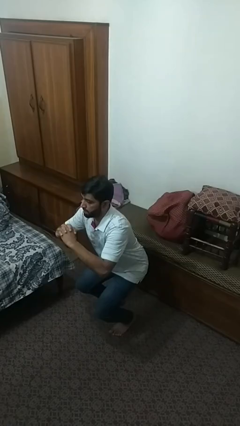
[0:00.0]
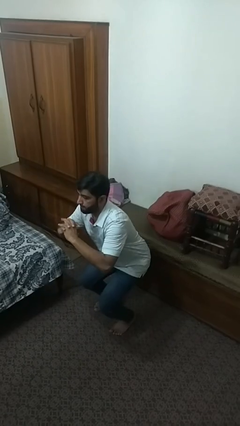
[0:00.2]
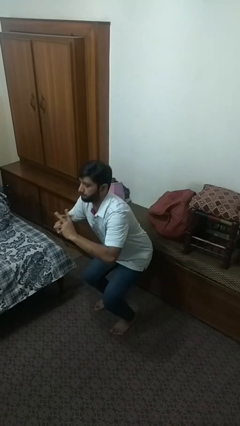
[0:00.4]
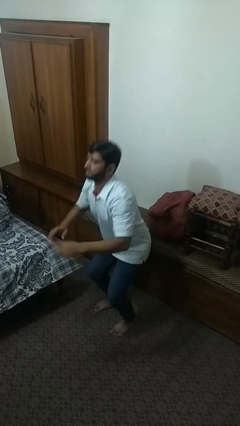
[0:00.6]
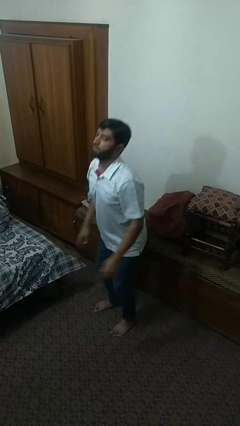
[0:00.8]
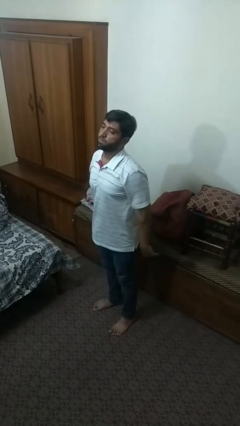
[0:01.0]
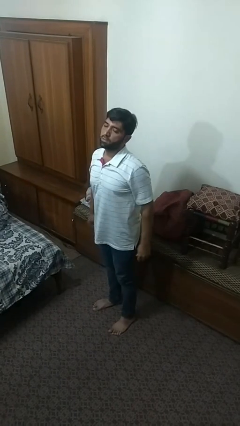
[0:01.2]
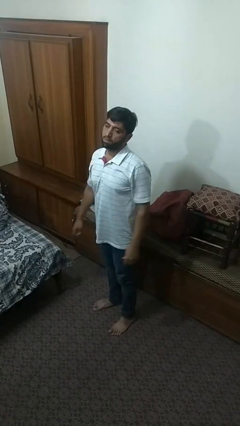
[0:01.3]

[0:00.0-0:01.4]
person stands up

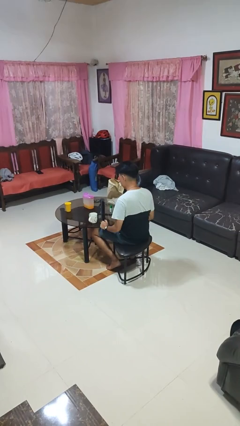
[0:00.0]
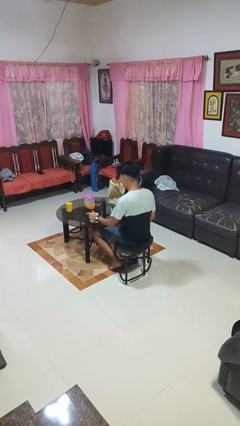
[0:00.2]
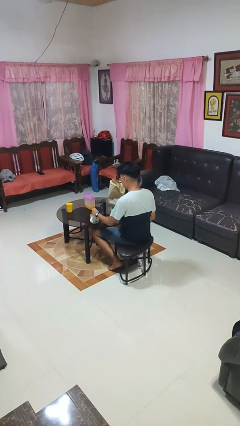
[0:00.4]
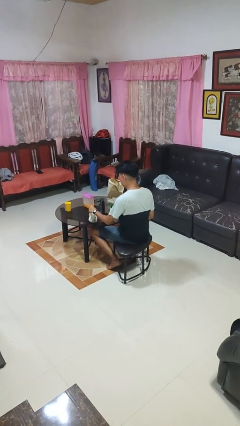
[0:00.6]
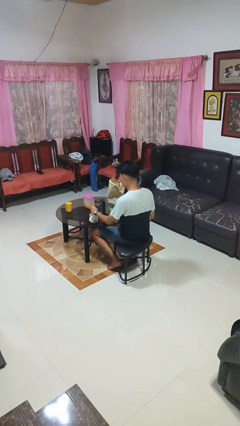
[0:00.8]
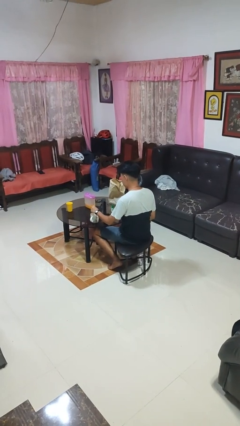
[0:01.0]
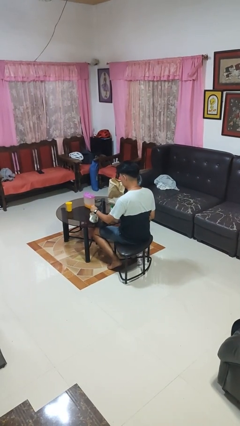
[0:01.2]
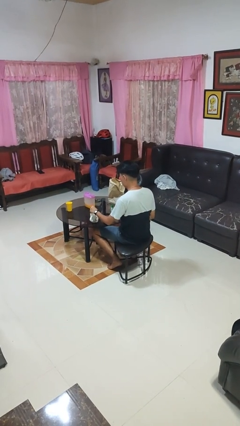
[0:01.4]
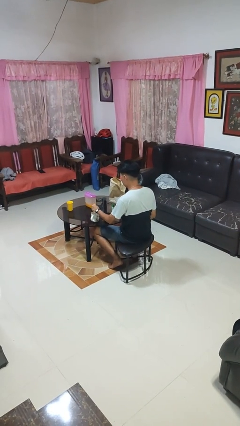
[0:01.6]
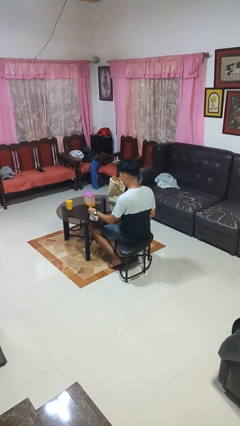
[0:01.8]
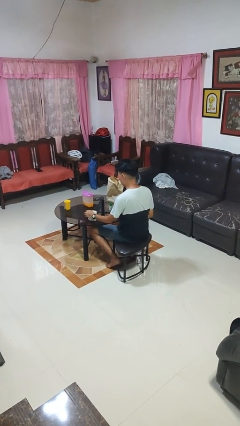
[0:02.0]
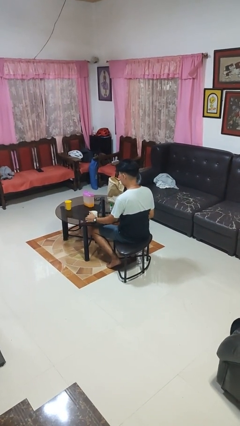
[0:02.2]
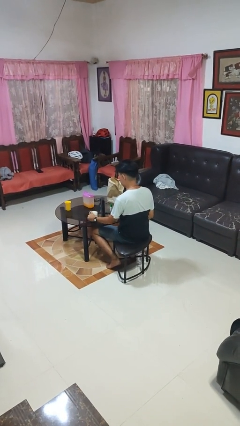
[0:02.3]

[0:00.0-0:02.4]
person stirs mug

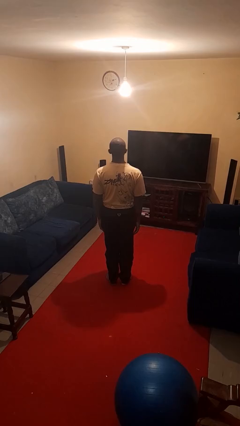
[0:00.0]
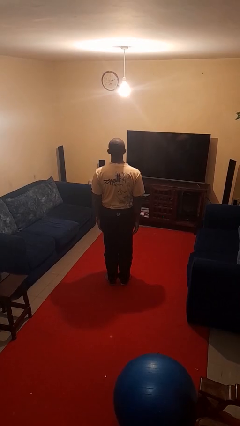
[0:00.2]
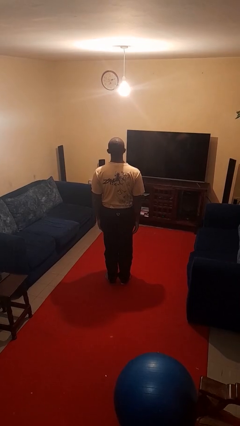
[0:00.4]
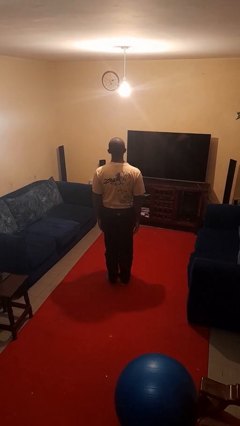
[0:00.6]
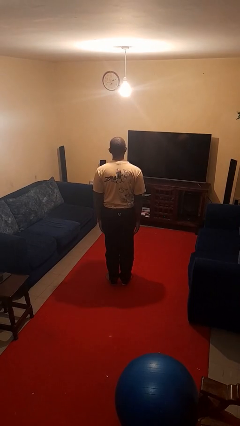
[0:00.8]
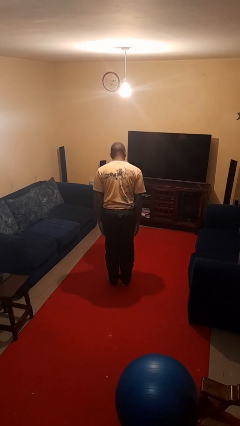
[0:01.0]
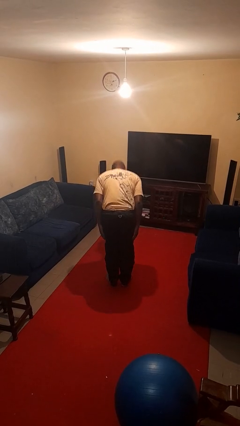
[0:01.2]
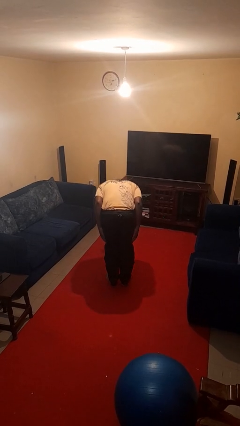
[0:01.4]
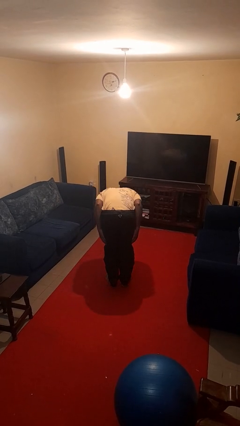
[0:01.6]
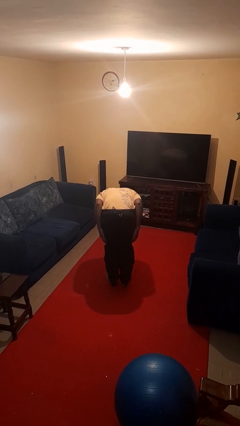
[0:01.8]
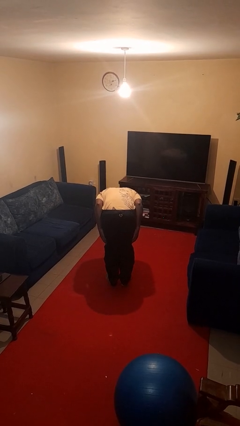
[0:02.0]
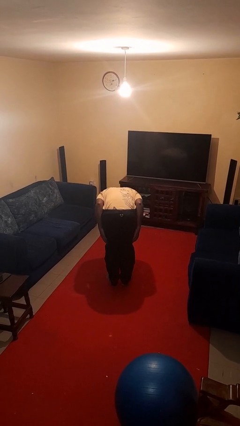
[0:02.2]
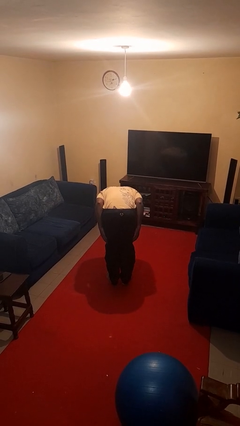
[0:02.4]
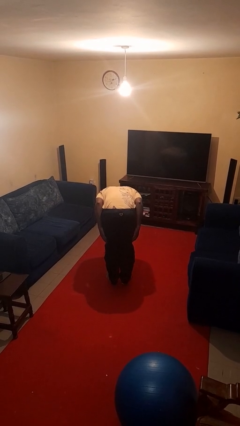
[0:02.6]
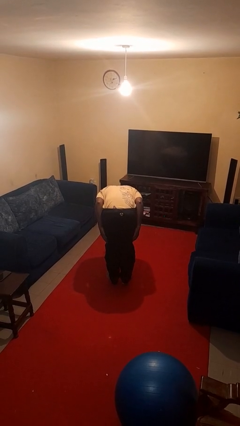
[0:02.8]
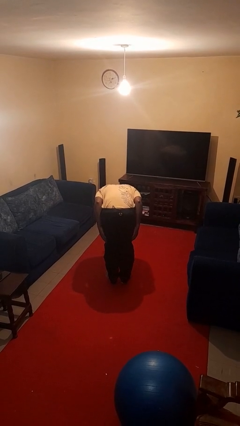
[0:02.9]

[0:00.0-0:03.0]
person bows

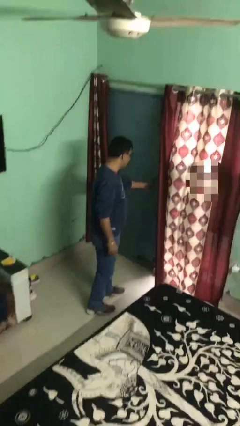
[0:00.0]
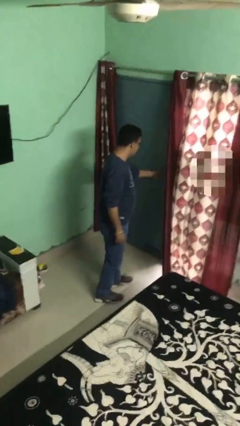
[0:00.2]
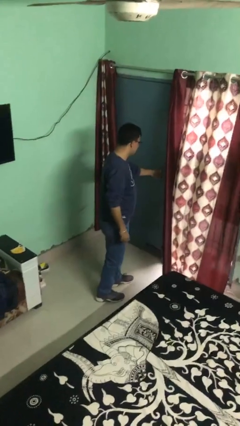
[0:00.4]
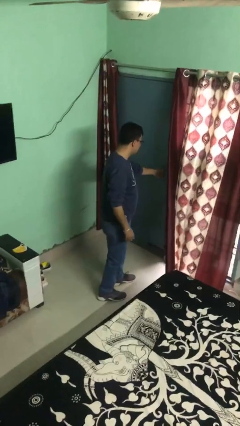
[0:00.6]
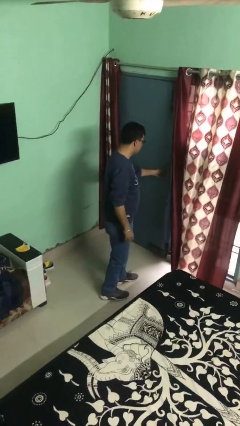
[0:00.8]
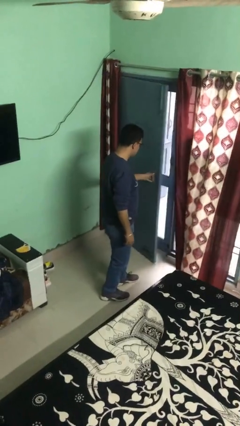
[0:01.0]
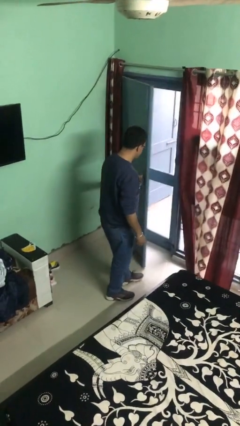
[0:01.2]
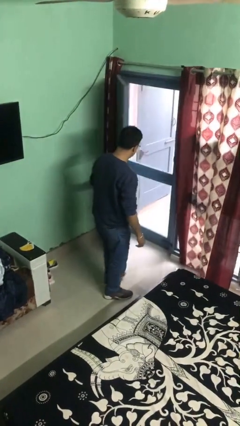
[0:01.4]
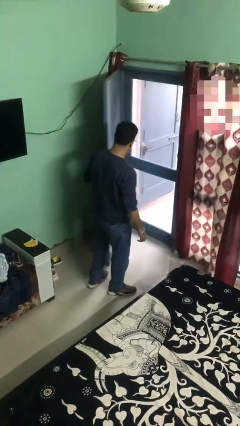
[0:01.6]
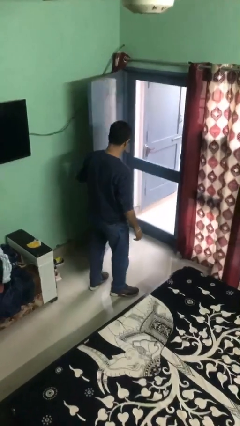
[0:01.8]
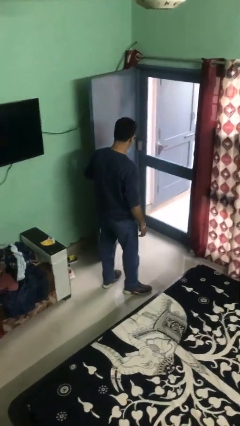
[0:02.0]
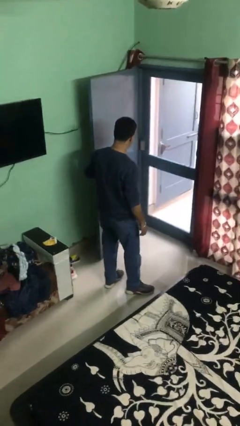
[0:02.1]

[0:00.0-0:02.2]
person opens facility door

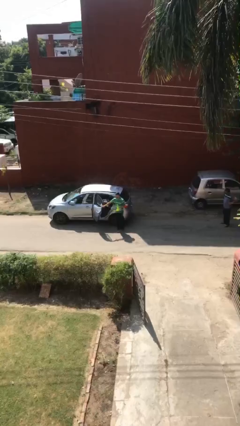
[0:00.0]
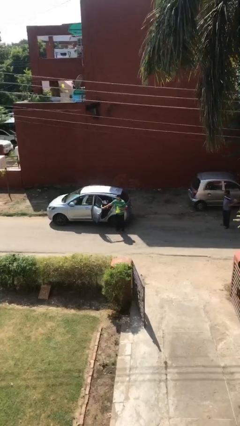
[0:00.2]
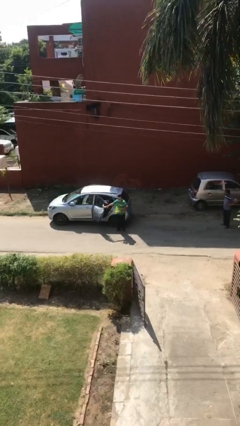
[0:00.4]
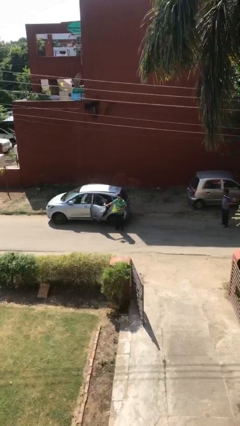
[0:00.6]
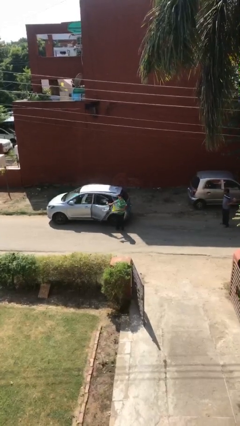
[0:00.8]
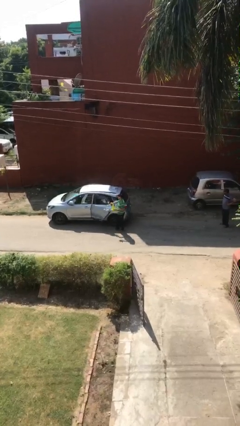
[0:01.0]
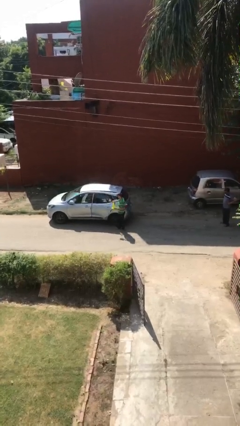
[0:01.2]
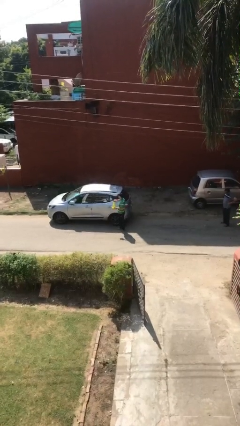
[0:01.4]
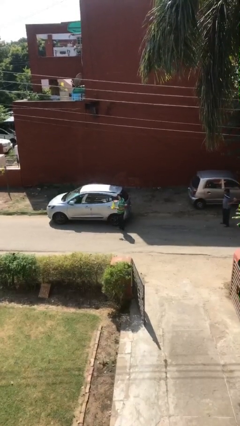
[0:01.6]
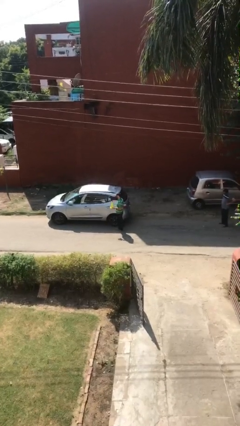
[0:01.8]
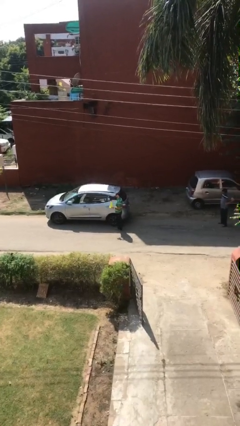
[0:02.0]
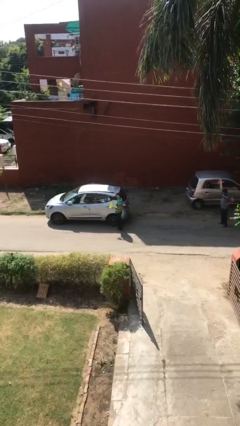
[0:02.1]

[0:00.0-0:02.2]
person closes car door

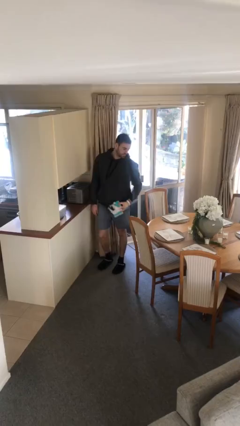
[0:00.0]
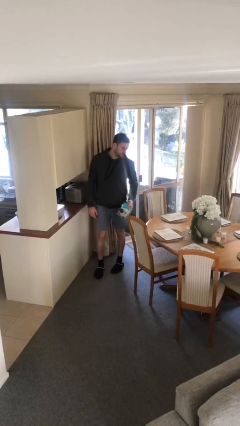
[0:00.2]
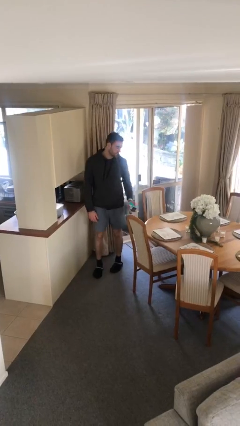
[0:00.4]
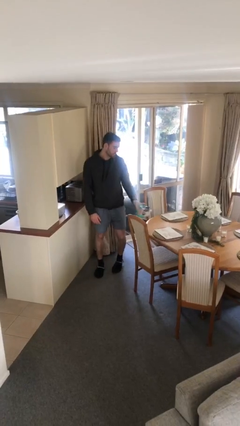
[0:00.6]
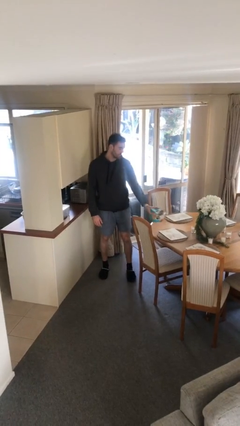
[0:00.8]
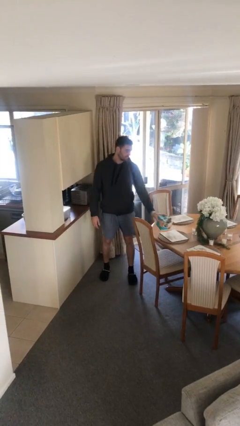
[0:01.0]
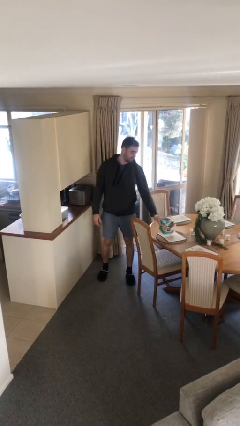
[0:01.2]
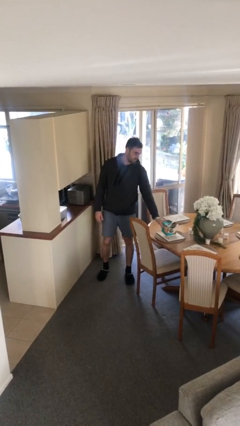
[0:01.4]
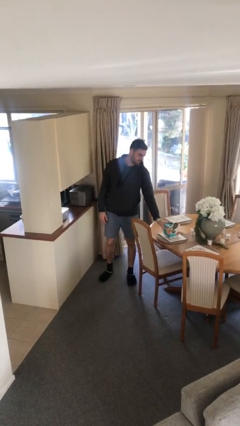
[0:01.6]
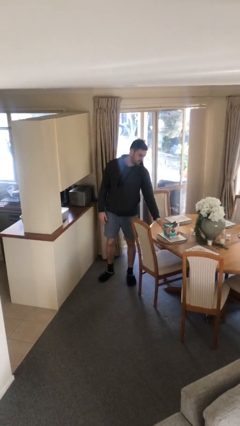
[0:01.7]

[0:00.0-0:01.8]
person puts down object on table

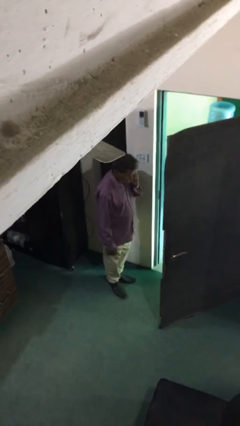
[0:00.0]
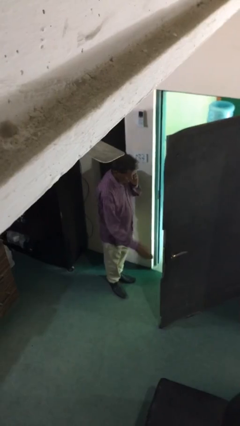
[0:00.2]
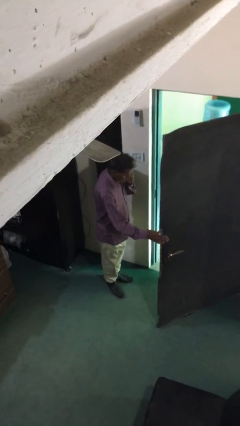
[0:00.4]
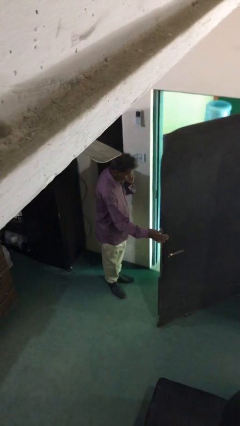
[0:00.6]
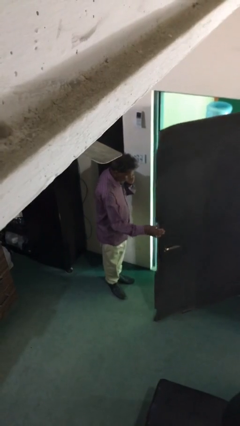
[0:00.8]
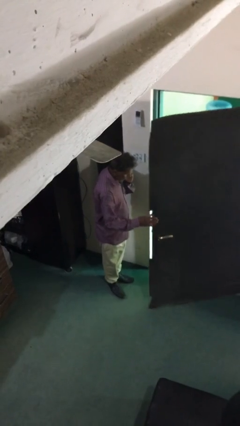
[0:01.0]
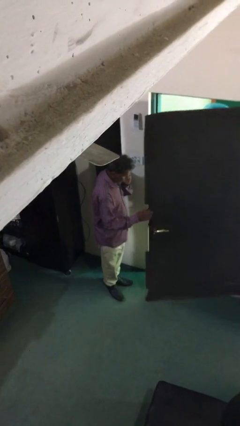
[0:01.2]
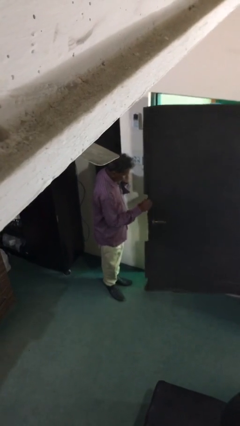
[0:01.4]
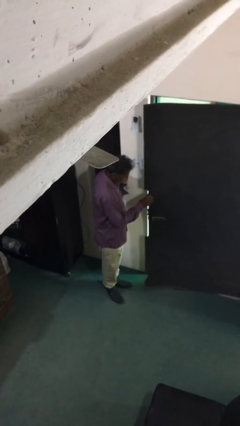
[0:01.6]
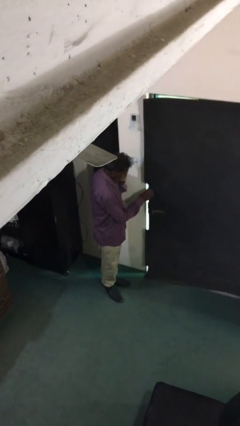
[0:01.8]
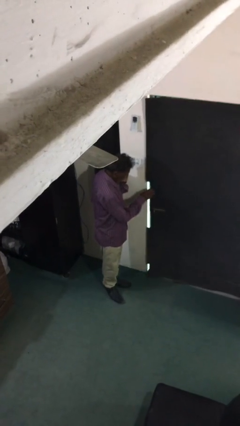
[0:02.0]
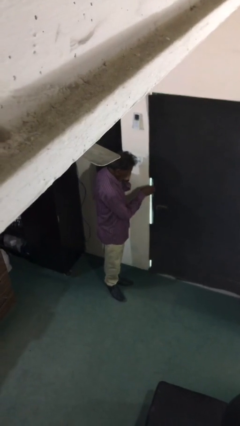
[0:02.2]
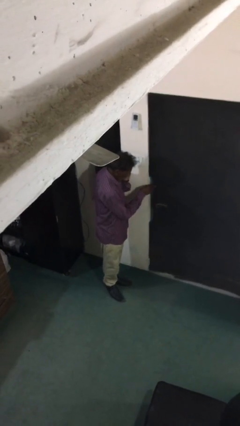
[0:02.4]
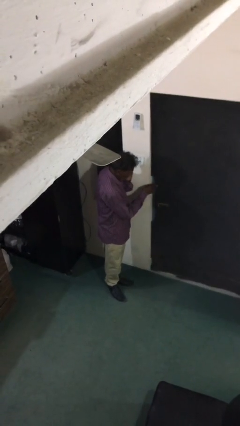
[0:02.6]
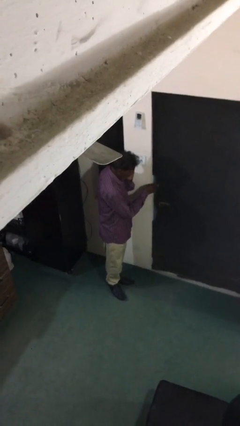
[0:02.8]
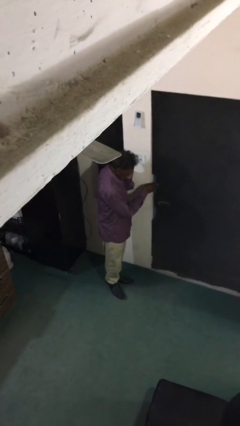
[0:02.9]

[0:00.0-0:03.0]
person closes facility door

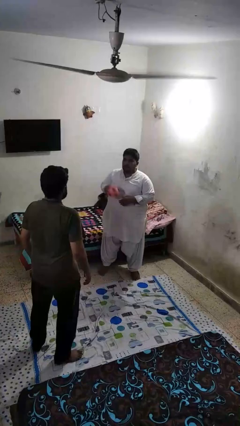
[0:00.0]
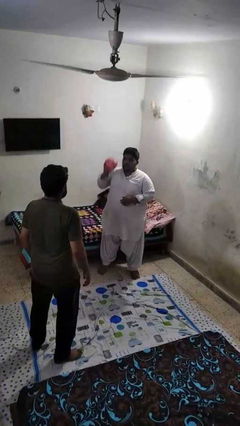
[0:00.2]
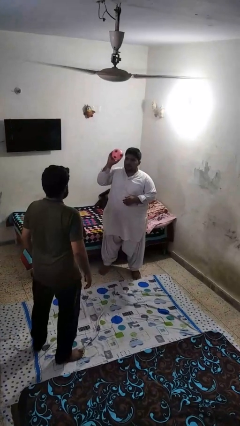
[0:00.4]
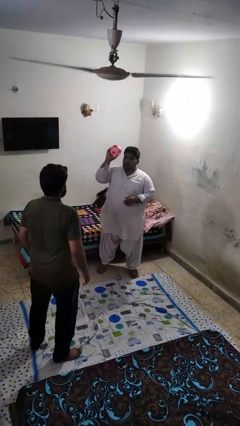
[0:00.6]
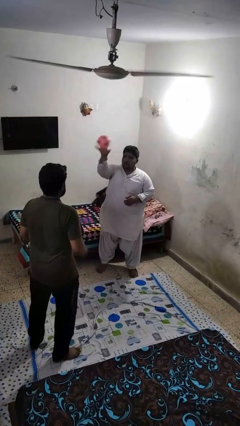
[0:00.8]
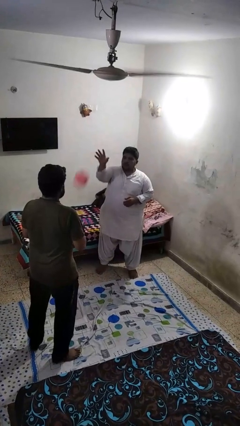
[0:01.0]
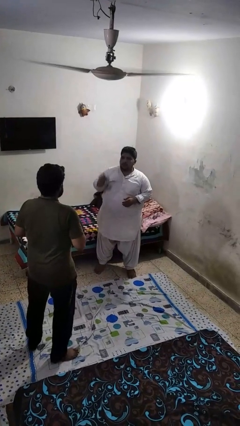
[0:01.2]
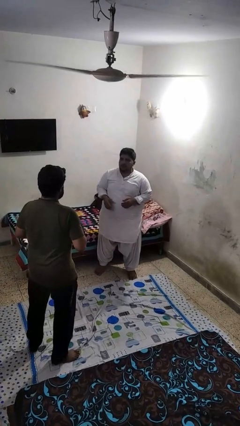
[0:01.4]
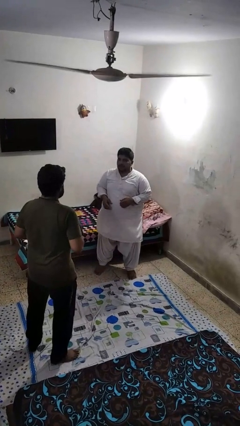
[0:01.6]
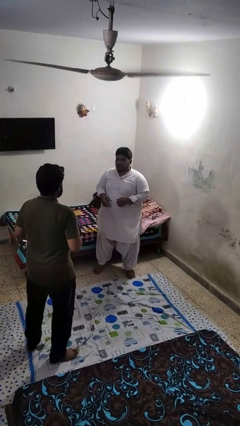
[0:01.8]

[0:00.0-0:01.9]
person throws object to person
